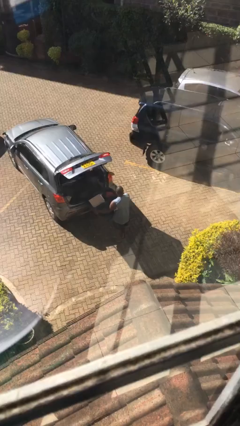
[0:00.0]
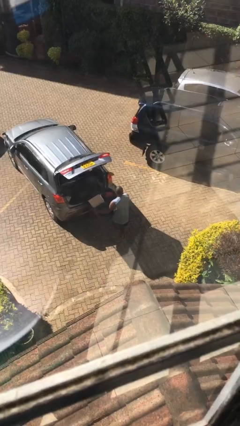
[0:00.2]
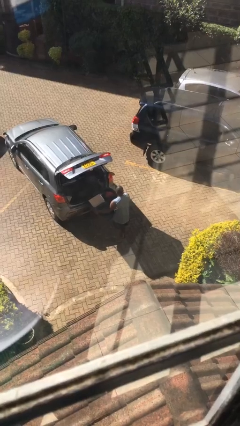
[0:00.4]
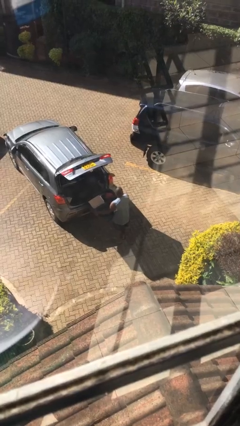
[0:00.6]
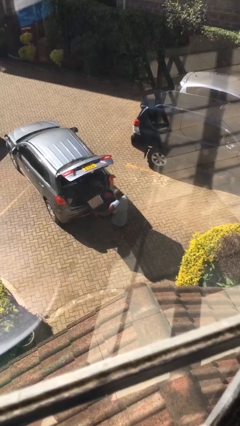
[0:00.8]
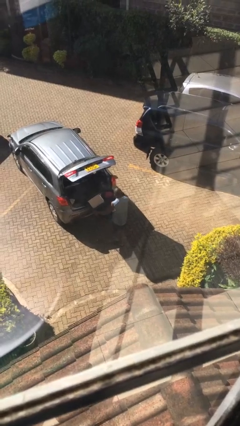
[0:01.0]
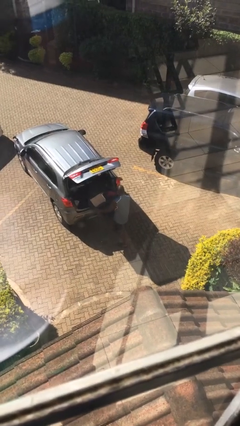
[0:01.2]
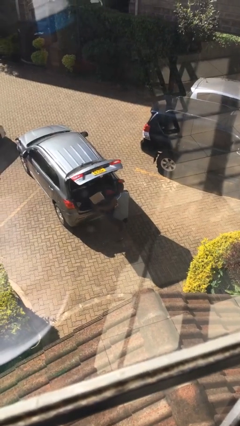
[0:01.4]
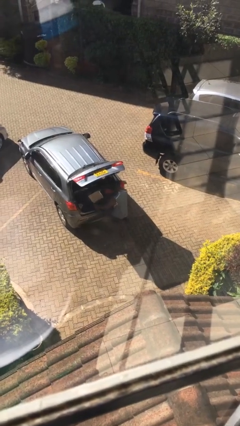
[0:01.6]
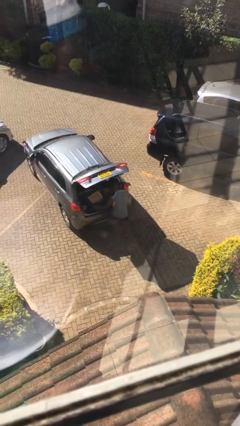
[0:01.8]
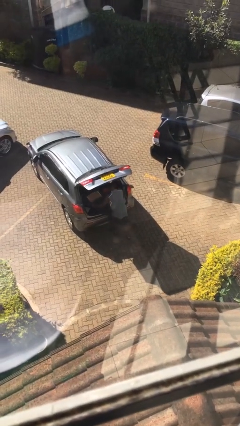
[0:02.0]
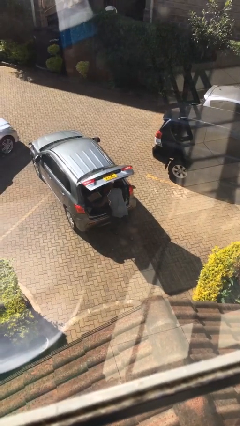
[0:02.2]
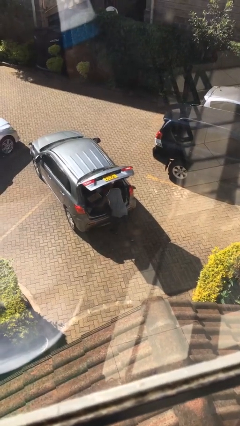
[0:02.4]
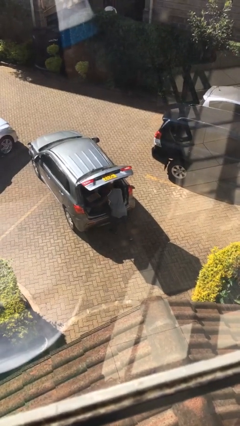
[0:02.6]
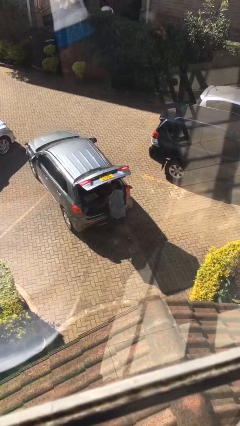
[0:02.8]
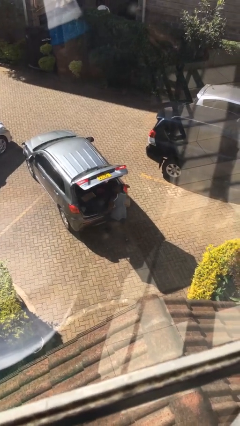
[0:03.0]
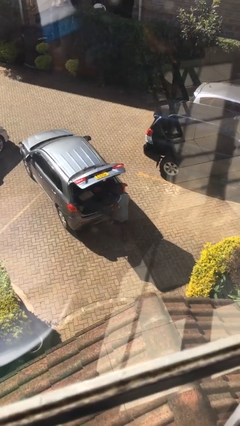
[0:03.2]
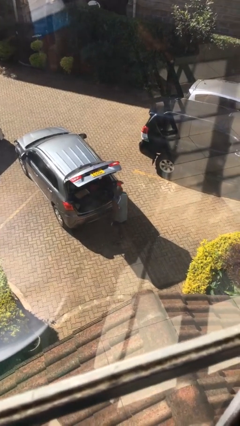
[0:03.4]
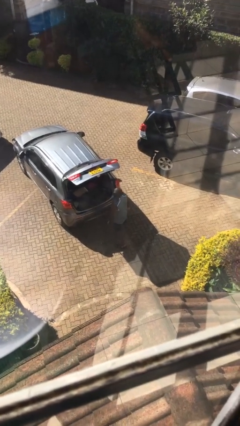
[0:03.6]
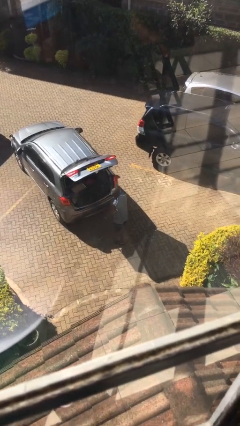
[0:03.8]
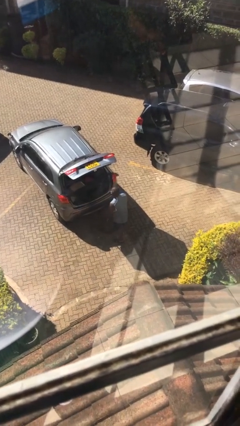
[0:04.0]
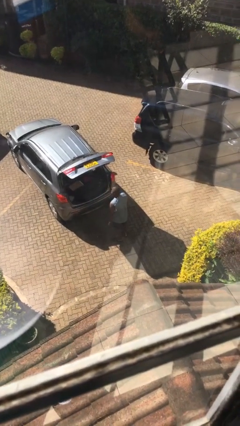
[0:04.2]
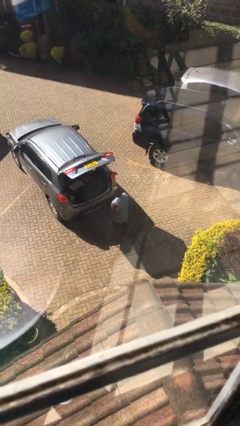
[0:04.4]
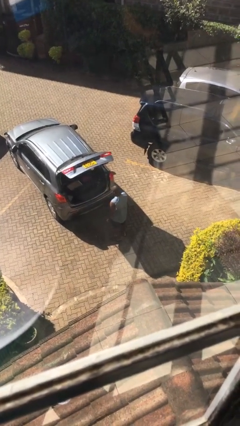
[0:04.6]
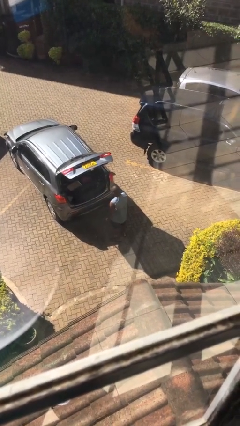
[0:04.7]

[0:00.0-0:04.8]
person loads car

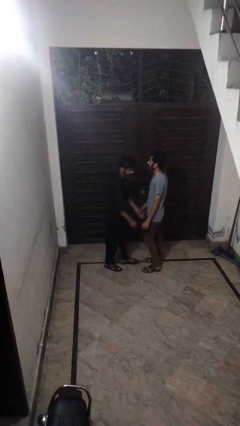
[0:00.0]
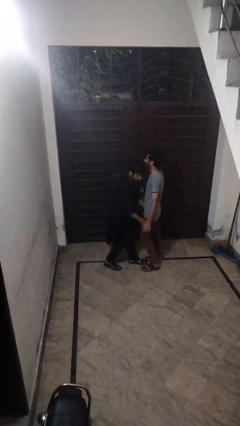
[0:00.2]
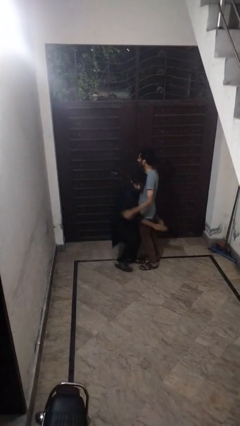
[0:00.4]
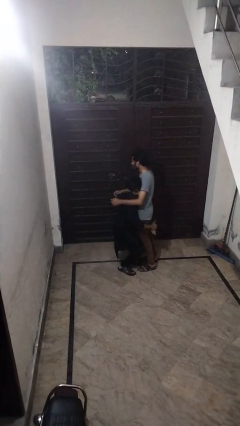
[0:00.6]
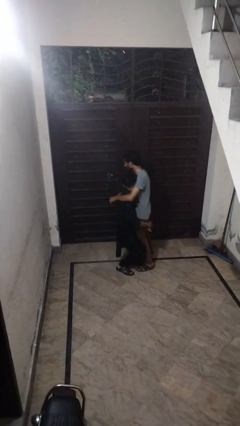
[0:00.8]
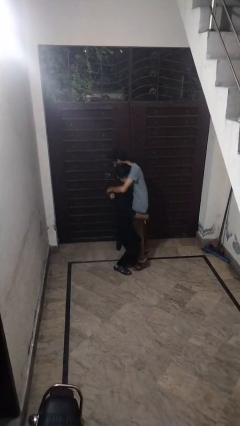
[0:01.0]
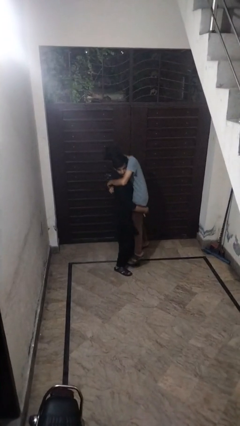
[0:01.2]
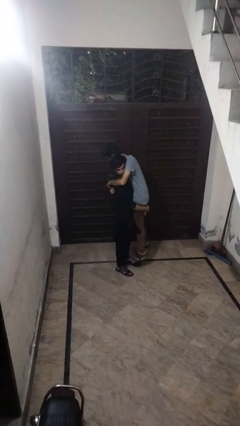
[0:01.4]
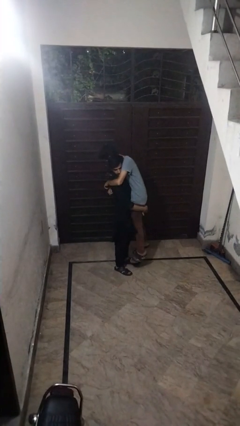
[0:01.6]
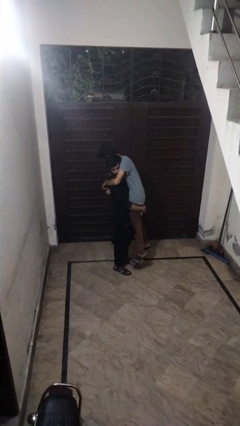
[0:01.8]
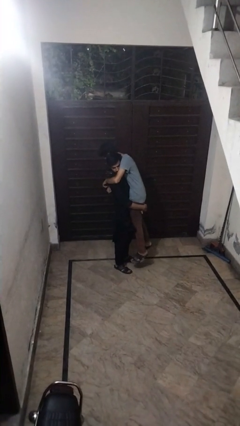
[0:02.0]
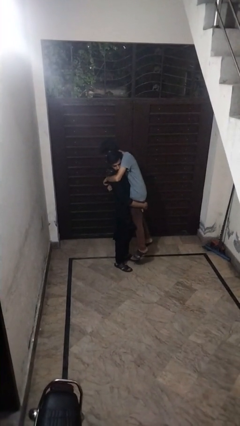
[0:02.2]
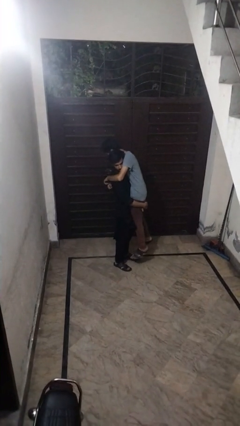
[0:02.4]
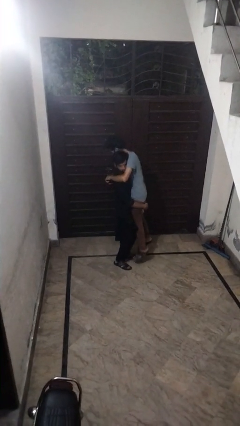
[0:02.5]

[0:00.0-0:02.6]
person picks up person

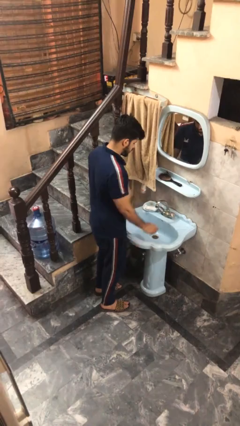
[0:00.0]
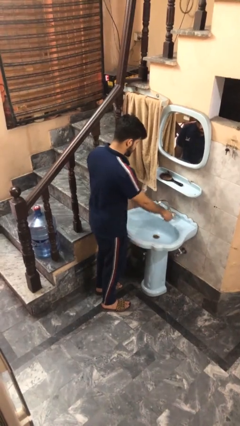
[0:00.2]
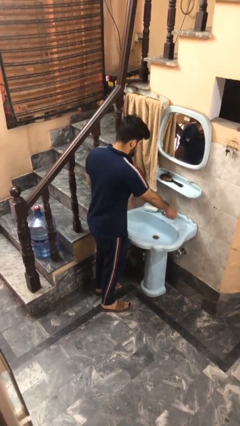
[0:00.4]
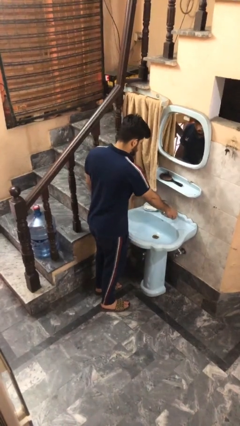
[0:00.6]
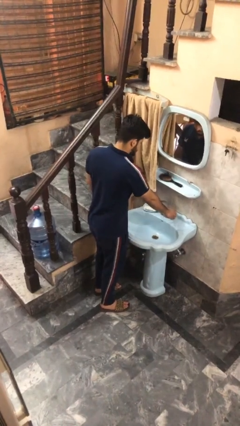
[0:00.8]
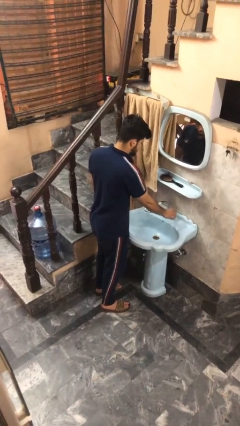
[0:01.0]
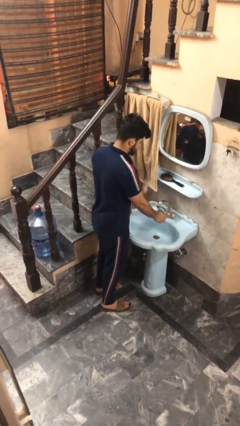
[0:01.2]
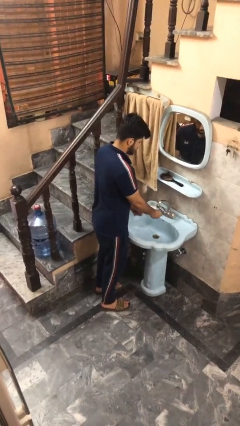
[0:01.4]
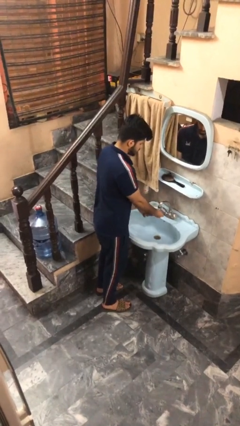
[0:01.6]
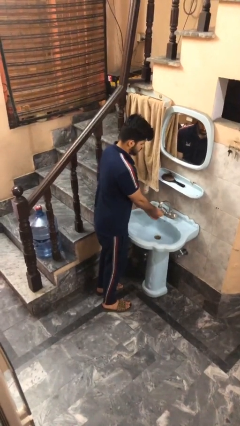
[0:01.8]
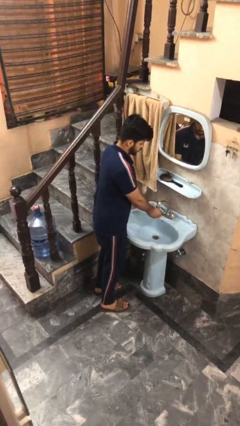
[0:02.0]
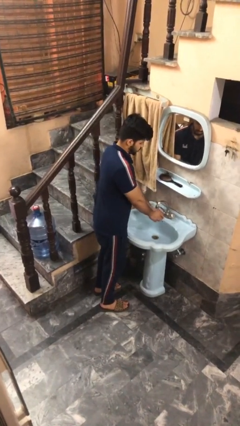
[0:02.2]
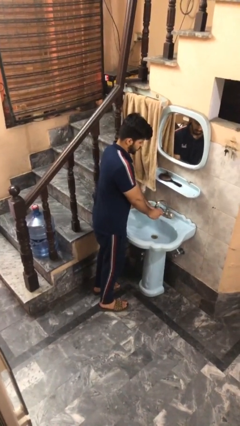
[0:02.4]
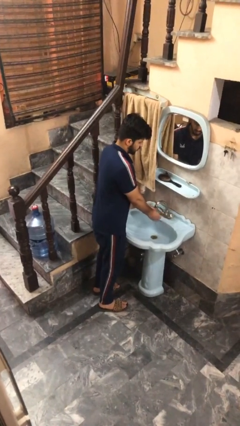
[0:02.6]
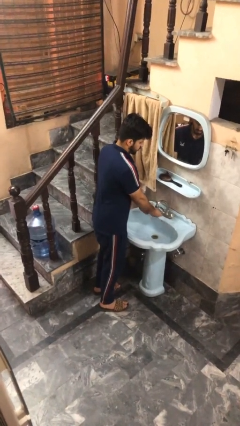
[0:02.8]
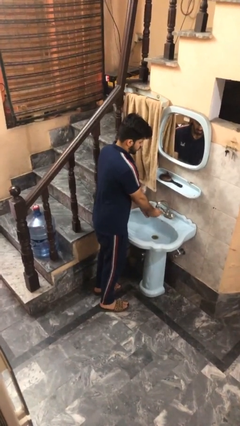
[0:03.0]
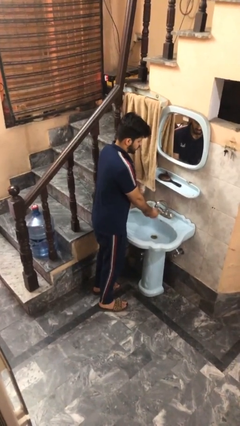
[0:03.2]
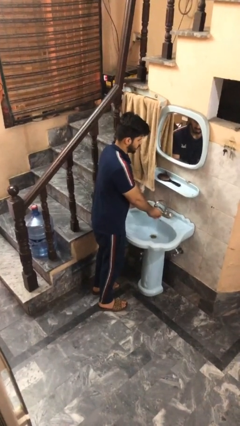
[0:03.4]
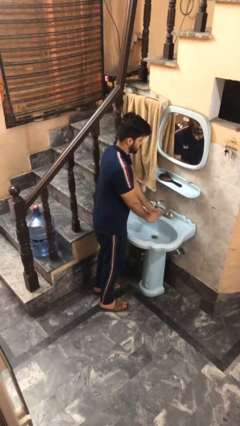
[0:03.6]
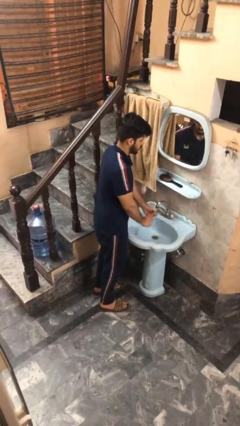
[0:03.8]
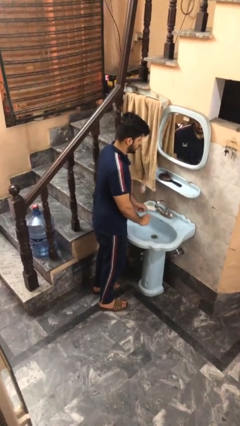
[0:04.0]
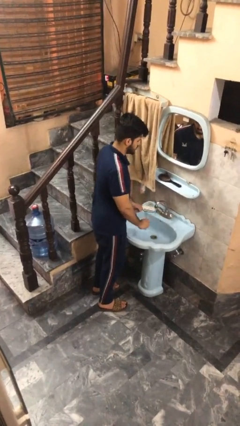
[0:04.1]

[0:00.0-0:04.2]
person washes hands

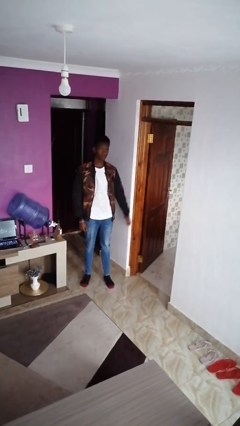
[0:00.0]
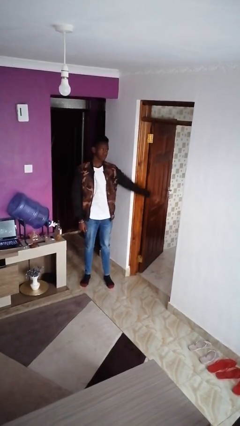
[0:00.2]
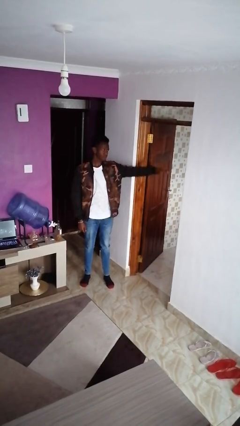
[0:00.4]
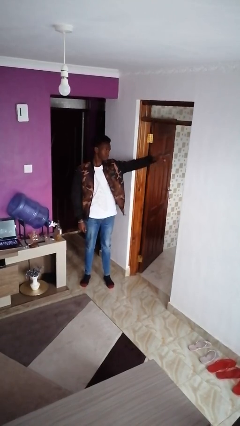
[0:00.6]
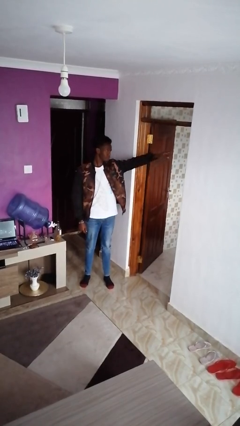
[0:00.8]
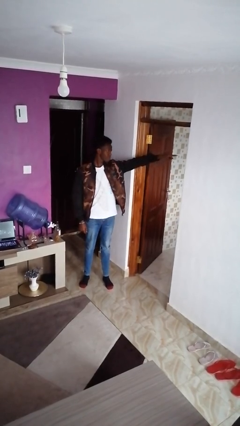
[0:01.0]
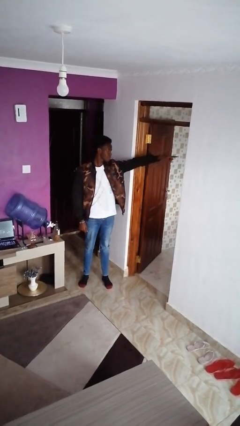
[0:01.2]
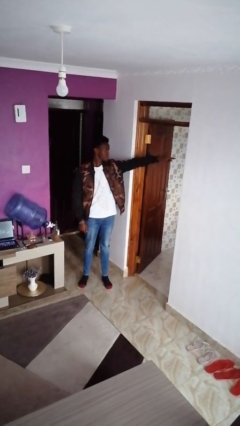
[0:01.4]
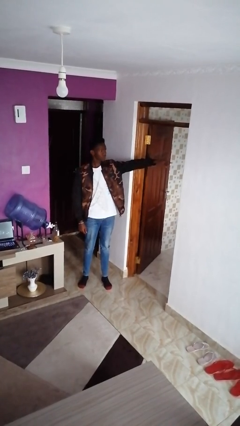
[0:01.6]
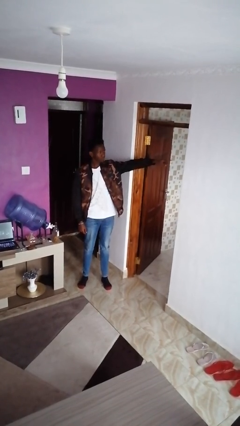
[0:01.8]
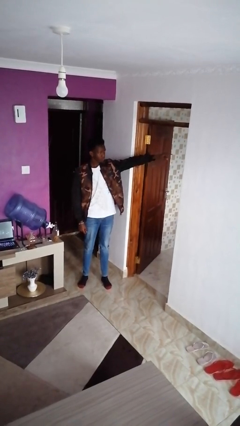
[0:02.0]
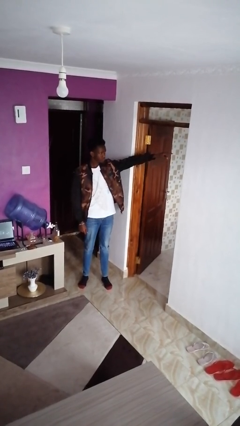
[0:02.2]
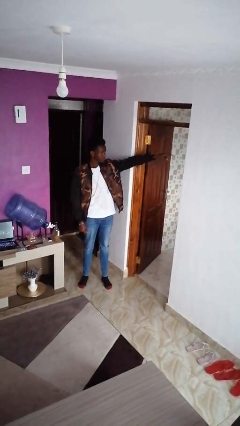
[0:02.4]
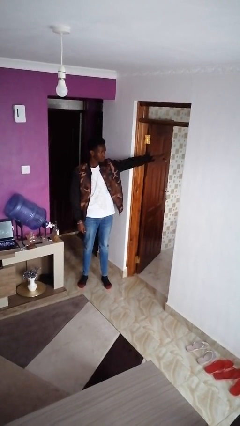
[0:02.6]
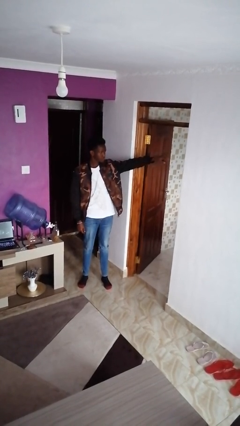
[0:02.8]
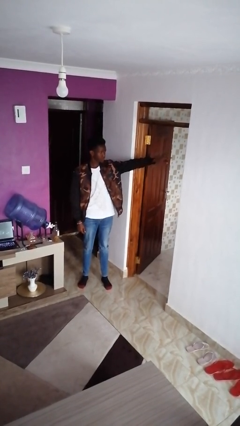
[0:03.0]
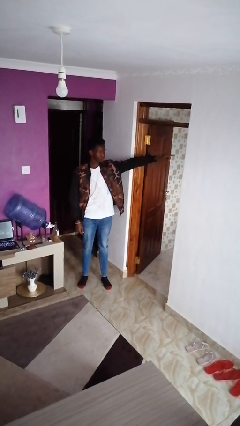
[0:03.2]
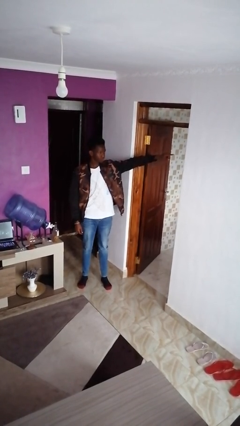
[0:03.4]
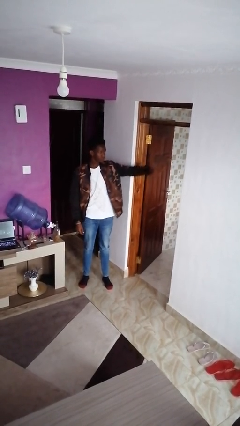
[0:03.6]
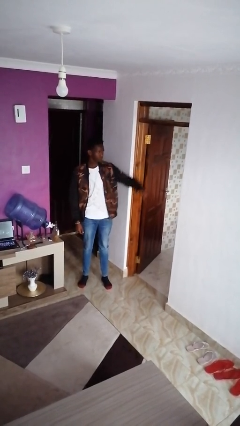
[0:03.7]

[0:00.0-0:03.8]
person points at person

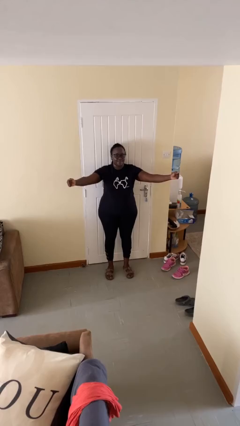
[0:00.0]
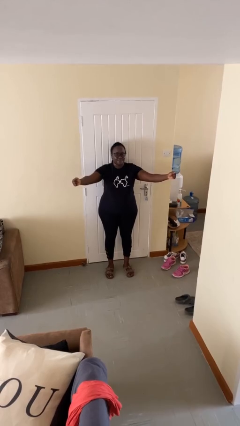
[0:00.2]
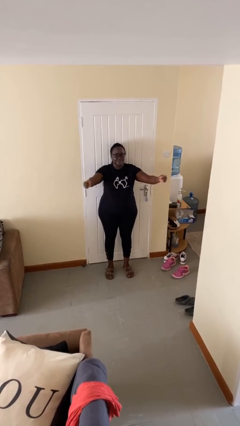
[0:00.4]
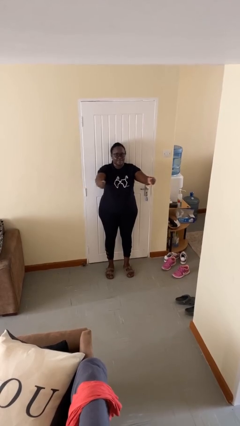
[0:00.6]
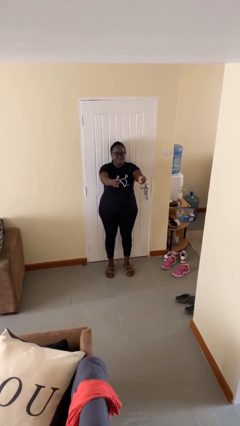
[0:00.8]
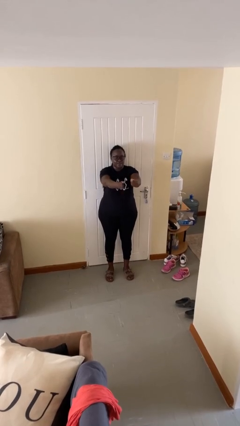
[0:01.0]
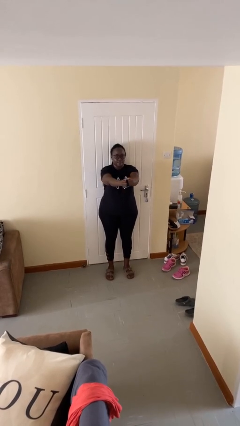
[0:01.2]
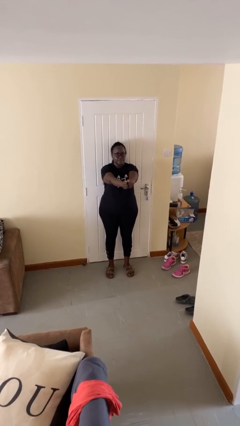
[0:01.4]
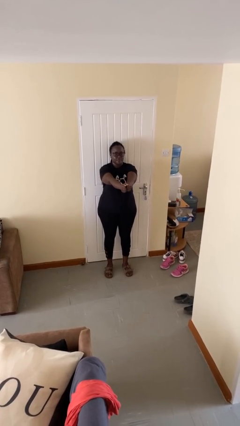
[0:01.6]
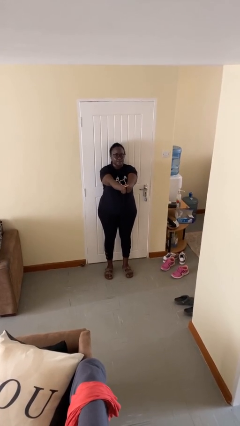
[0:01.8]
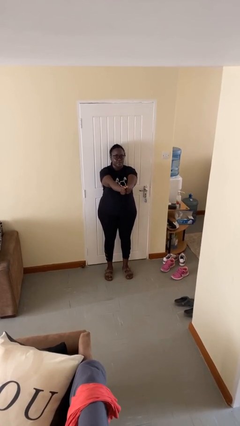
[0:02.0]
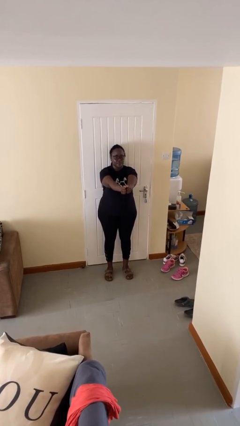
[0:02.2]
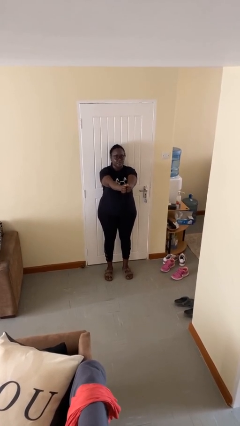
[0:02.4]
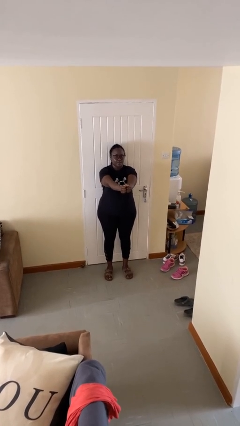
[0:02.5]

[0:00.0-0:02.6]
person gestures zoom out
